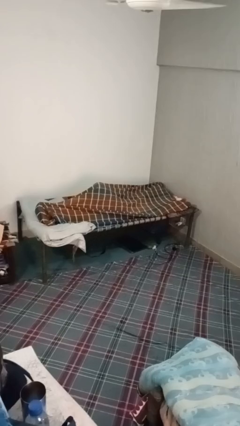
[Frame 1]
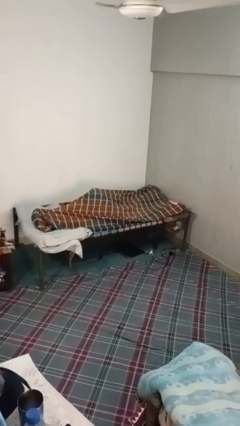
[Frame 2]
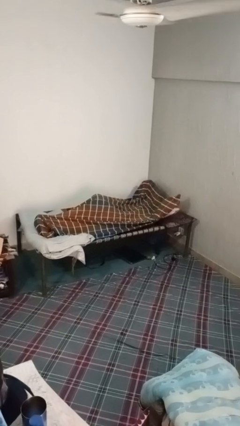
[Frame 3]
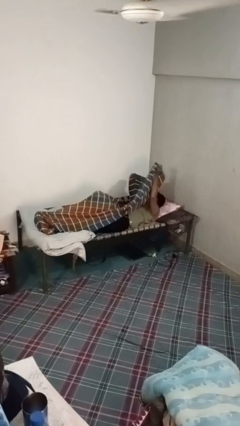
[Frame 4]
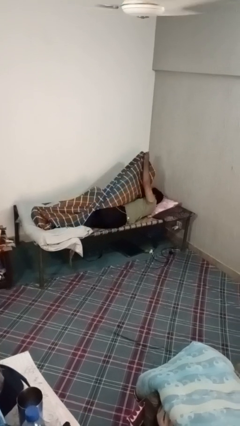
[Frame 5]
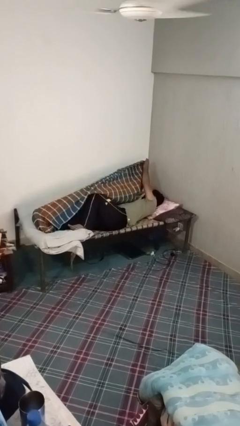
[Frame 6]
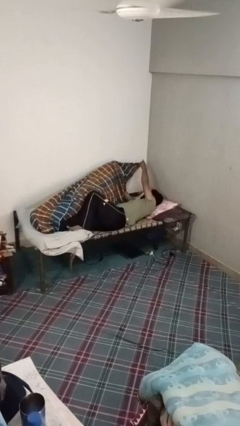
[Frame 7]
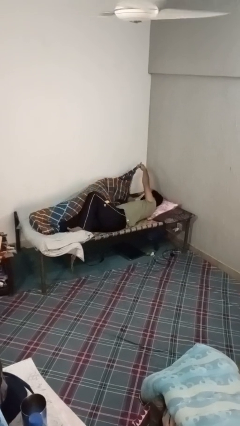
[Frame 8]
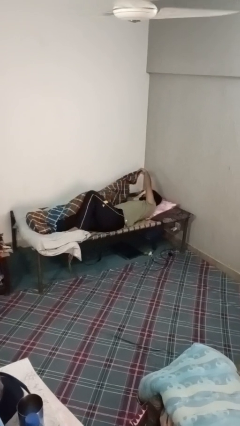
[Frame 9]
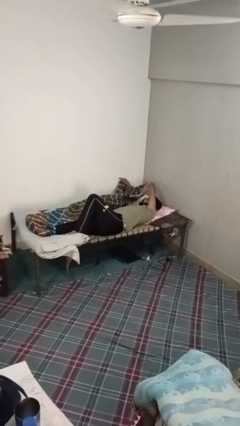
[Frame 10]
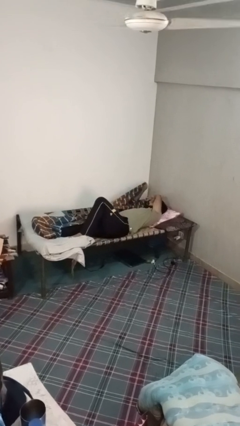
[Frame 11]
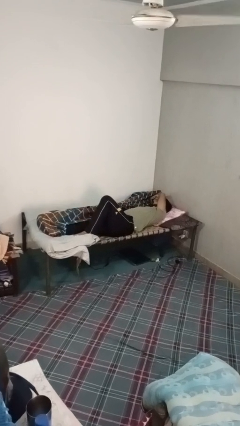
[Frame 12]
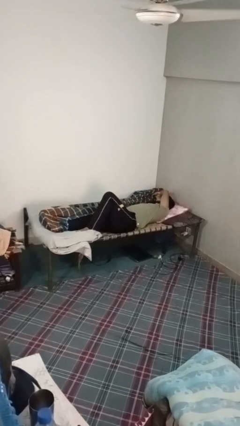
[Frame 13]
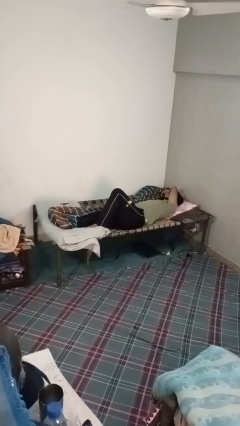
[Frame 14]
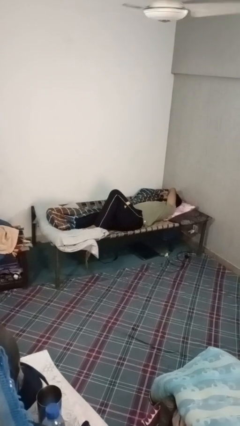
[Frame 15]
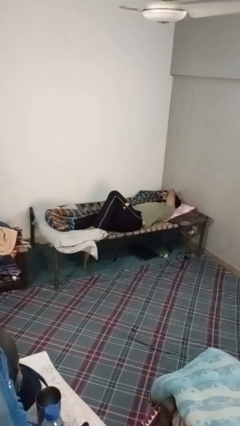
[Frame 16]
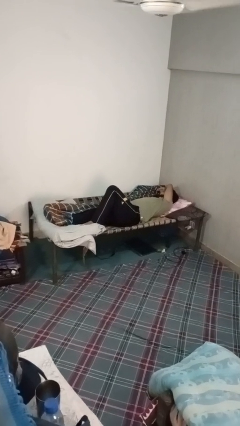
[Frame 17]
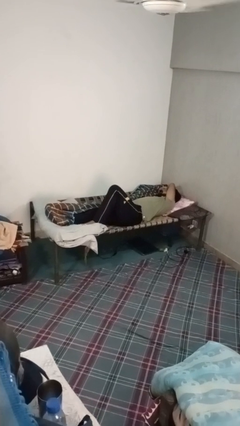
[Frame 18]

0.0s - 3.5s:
person uncovers with bedsheets

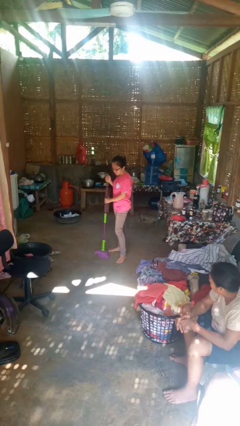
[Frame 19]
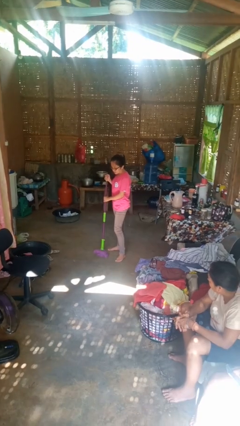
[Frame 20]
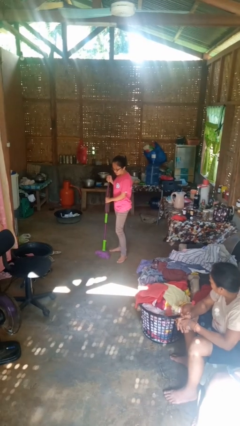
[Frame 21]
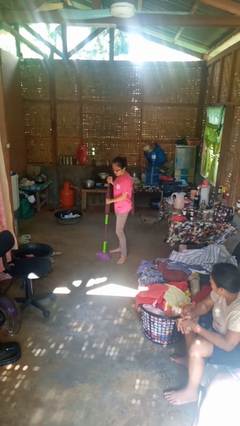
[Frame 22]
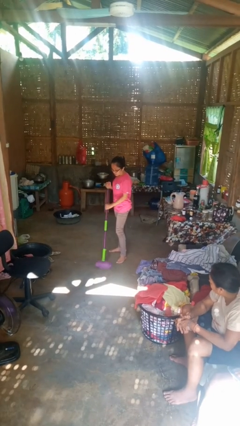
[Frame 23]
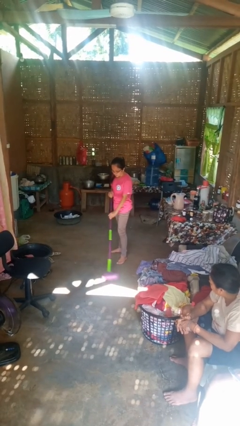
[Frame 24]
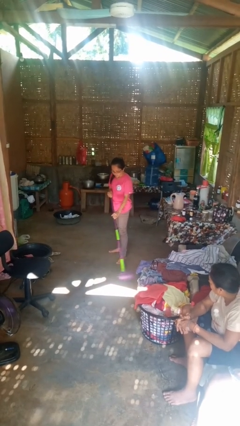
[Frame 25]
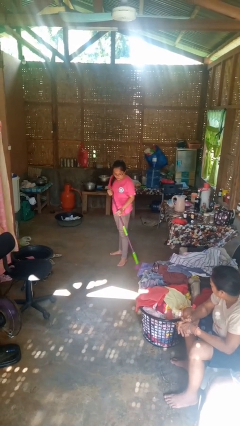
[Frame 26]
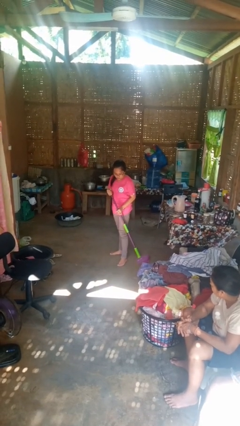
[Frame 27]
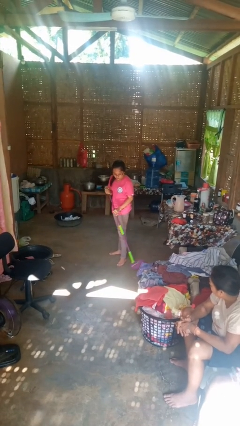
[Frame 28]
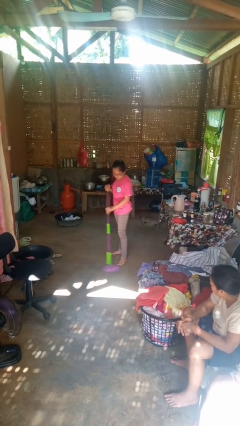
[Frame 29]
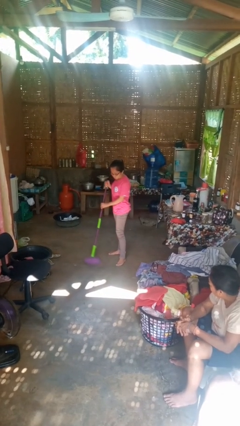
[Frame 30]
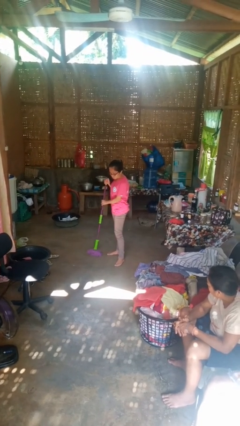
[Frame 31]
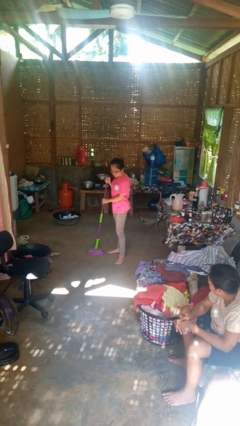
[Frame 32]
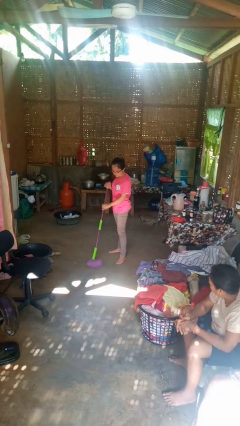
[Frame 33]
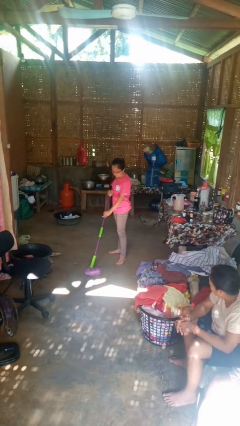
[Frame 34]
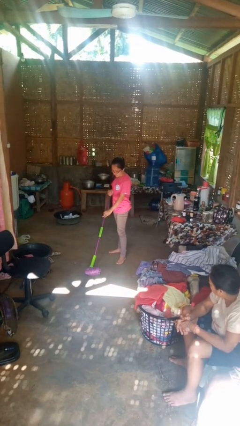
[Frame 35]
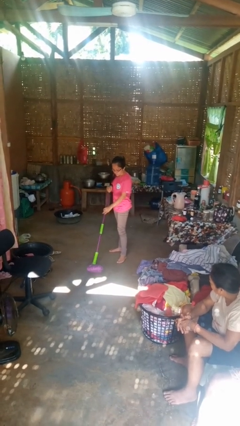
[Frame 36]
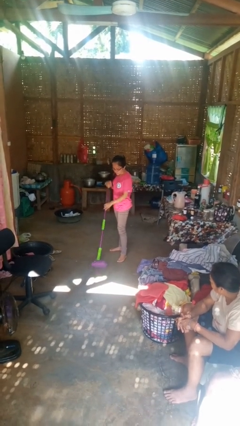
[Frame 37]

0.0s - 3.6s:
person mops

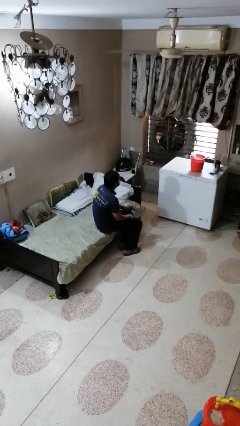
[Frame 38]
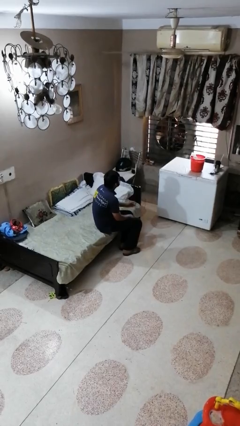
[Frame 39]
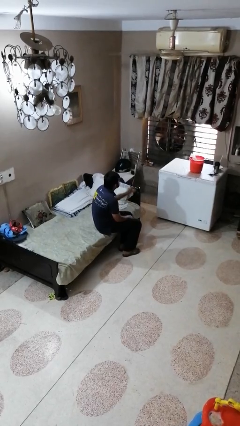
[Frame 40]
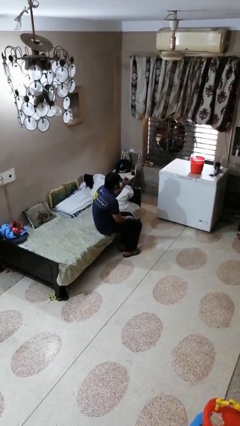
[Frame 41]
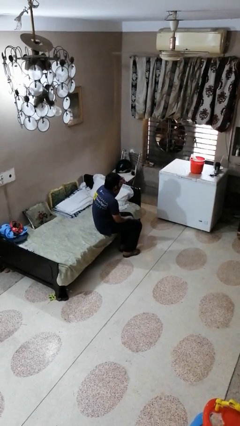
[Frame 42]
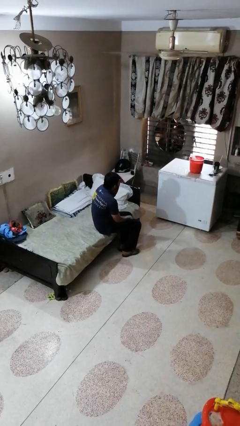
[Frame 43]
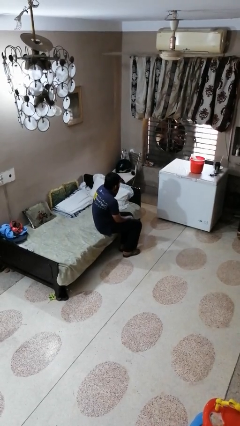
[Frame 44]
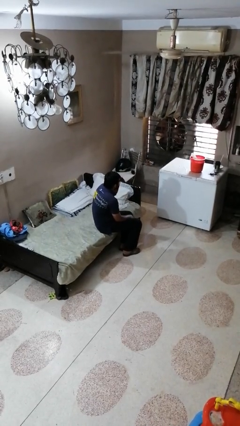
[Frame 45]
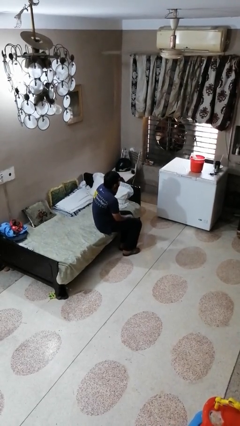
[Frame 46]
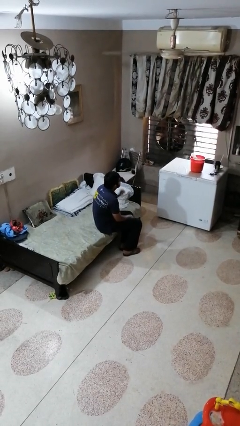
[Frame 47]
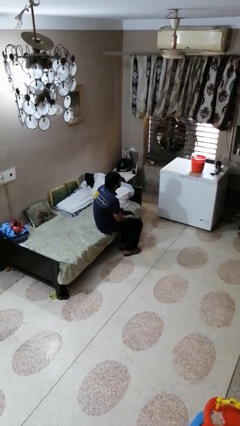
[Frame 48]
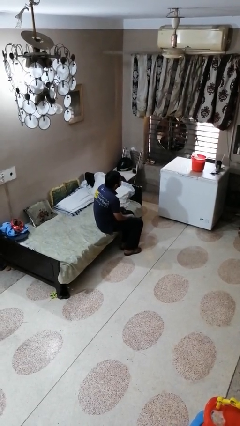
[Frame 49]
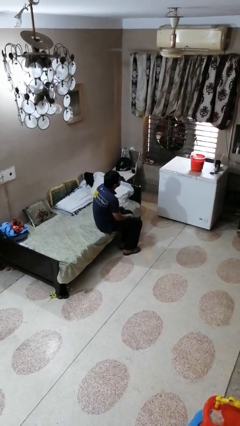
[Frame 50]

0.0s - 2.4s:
person puts on glasses

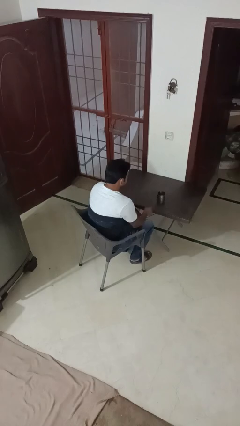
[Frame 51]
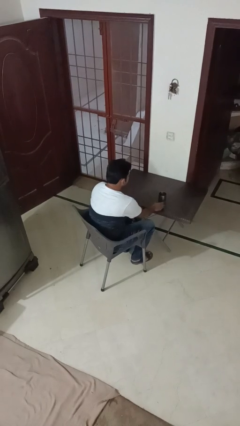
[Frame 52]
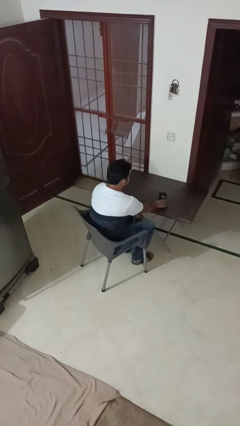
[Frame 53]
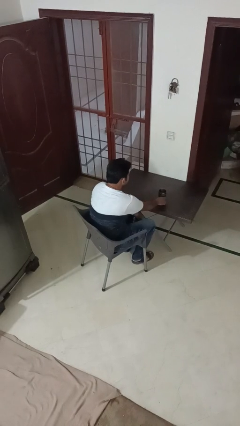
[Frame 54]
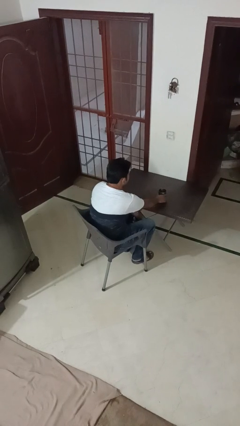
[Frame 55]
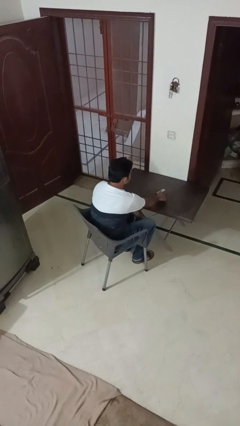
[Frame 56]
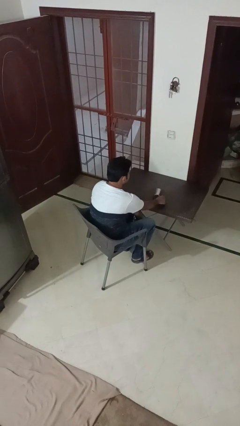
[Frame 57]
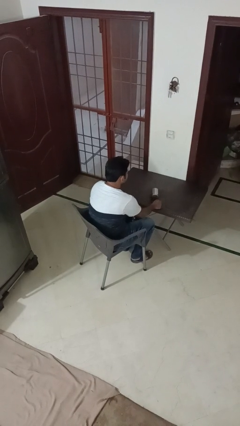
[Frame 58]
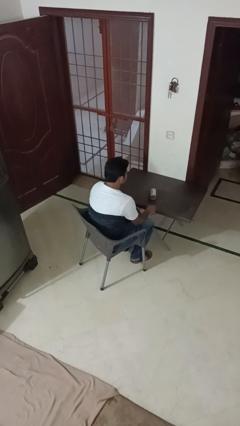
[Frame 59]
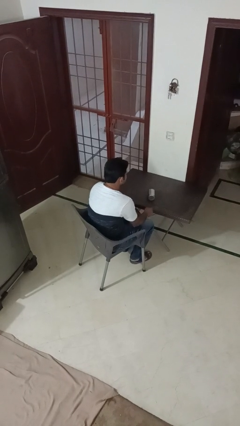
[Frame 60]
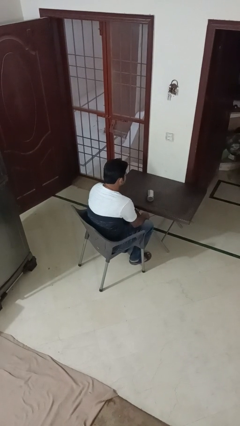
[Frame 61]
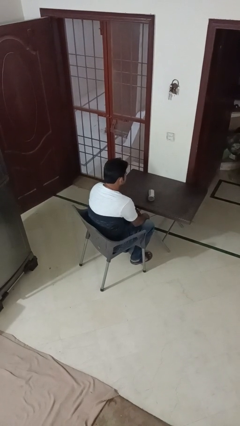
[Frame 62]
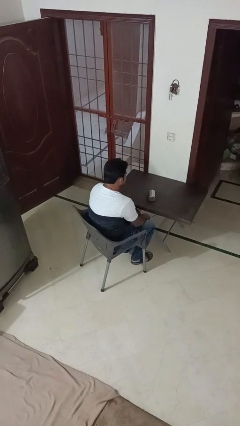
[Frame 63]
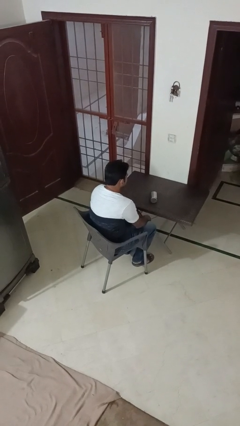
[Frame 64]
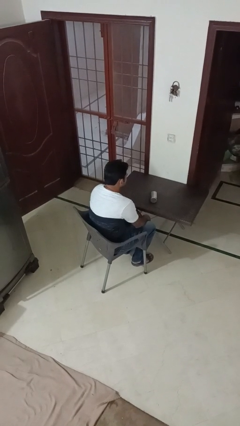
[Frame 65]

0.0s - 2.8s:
person knocks over glass

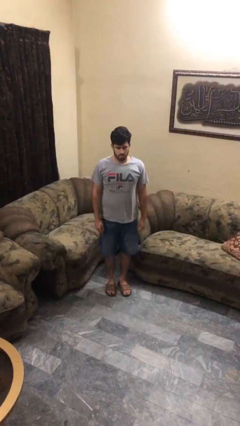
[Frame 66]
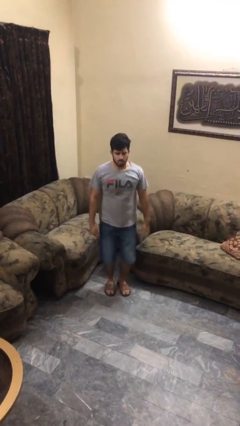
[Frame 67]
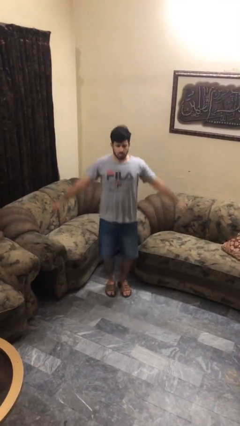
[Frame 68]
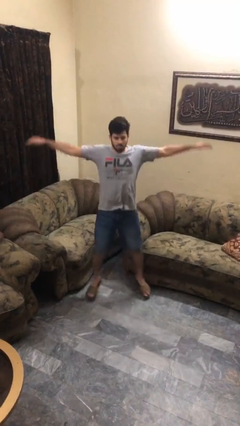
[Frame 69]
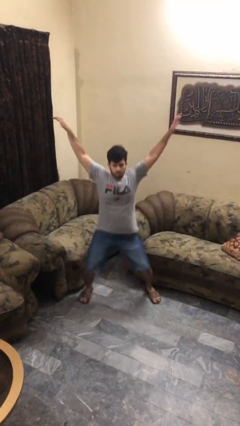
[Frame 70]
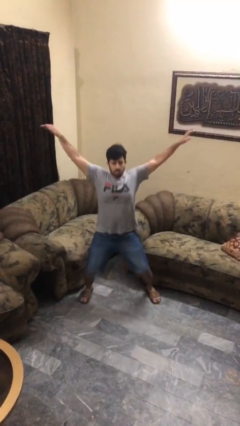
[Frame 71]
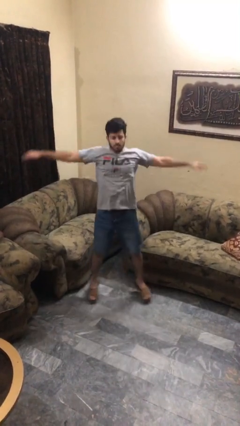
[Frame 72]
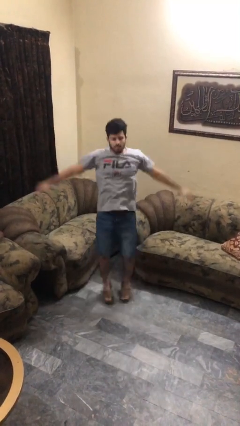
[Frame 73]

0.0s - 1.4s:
person exercises with jumping jacks

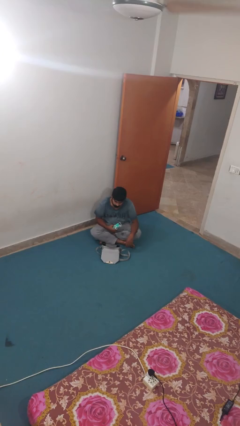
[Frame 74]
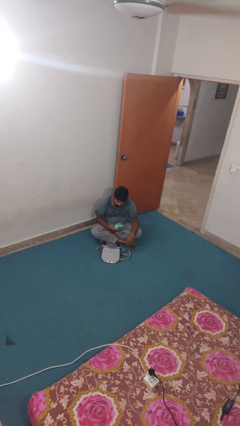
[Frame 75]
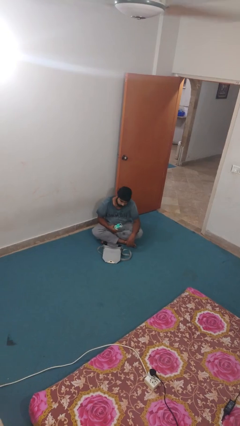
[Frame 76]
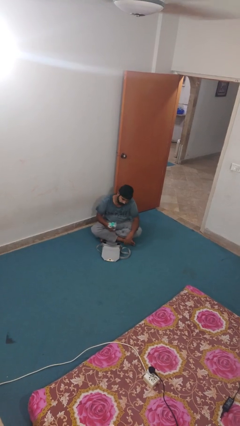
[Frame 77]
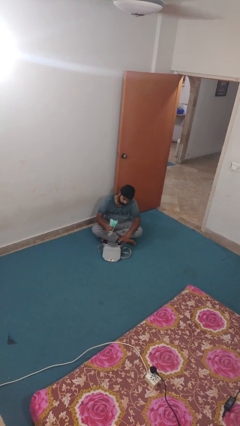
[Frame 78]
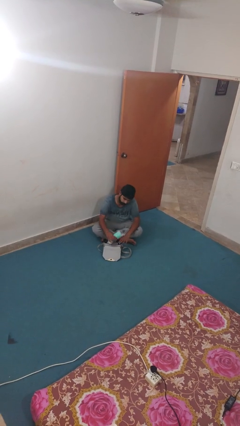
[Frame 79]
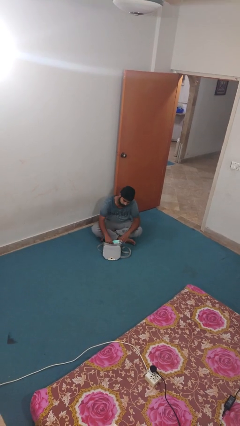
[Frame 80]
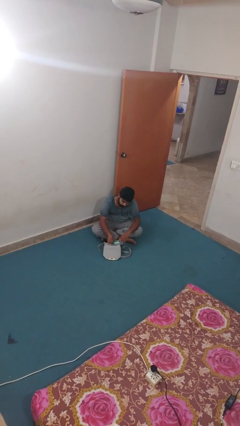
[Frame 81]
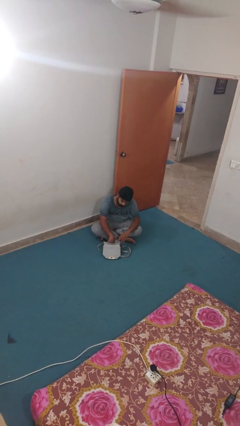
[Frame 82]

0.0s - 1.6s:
person puts object into purse

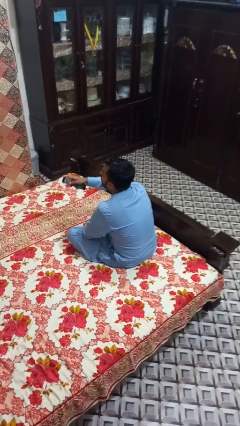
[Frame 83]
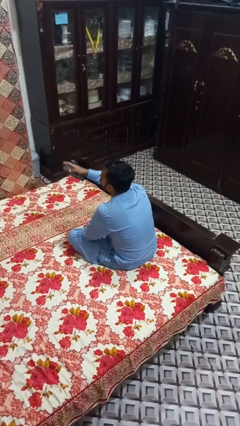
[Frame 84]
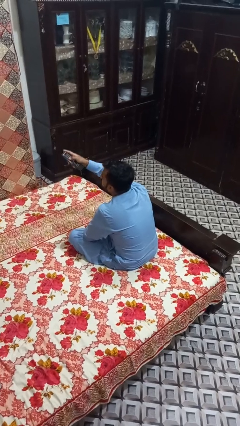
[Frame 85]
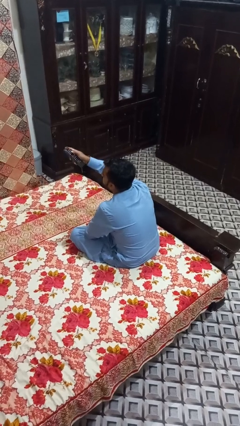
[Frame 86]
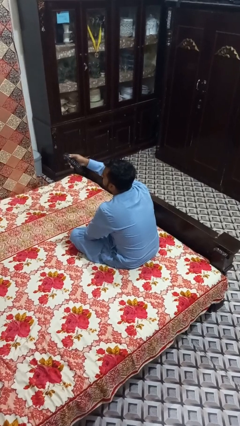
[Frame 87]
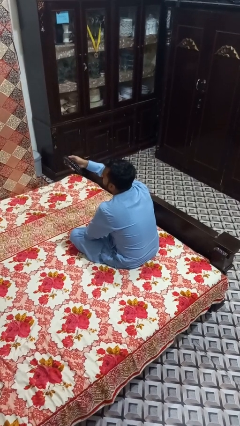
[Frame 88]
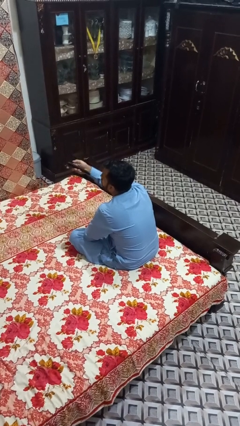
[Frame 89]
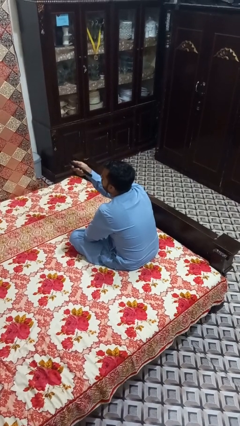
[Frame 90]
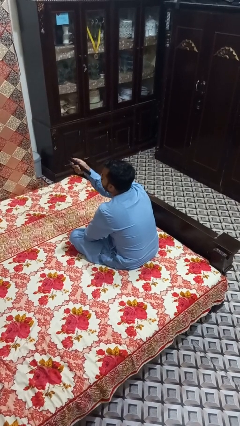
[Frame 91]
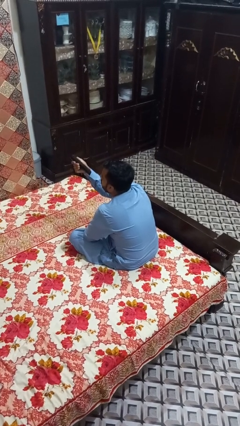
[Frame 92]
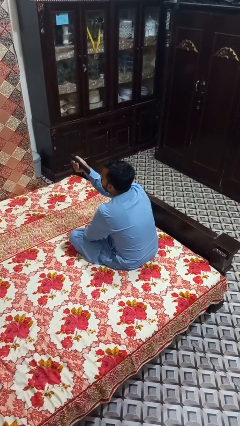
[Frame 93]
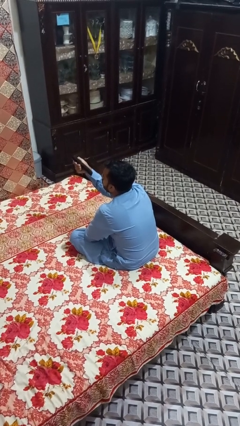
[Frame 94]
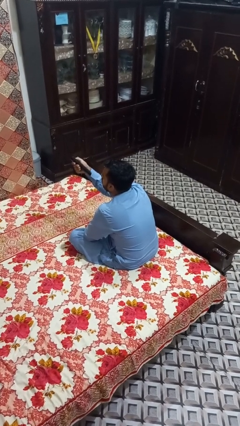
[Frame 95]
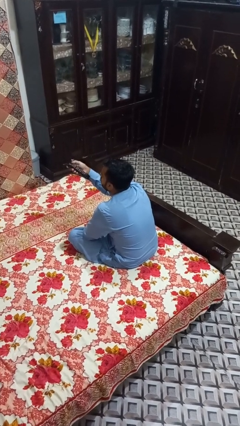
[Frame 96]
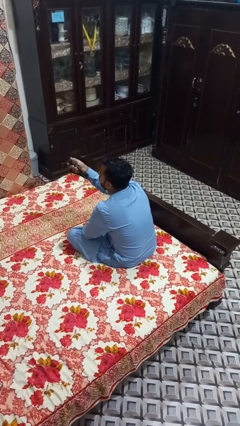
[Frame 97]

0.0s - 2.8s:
person uses television remote
